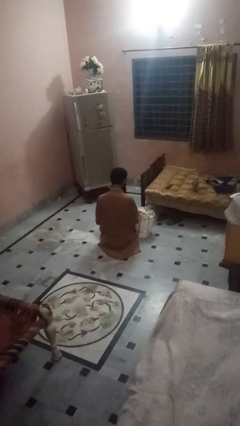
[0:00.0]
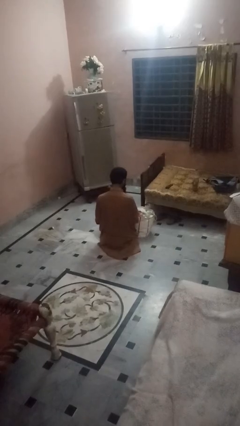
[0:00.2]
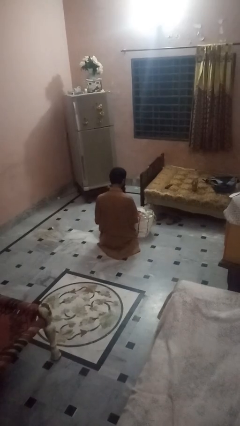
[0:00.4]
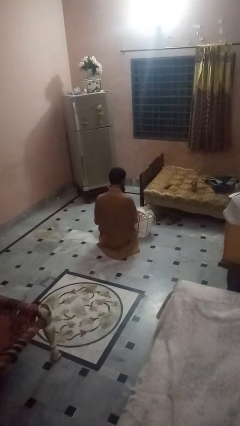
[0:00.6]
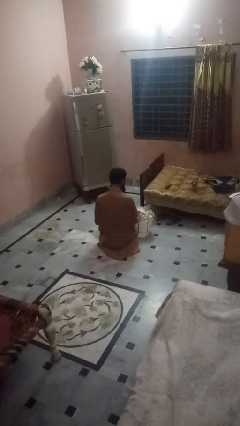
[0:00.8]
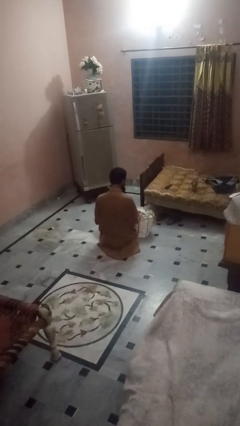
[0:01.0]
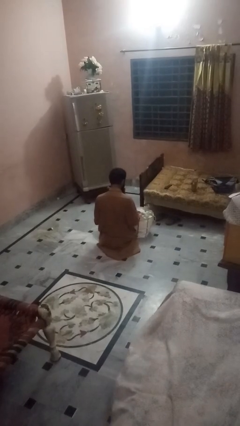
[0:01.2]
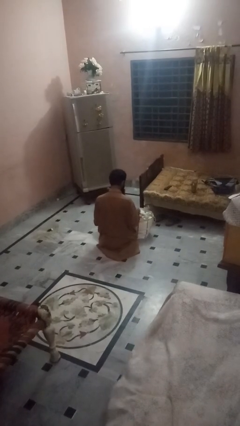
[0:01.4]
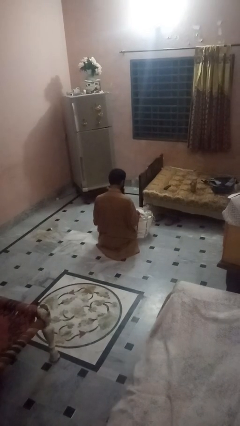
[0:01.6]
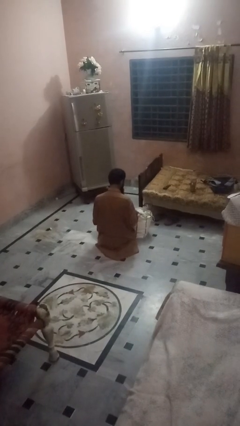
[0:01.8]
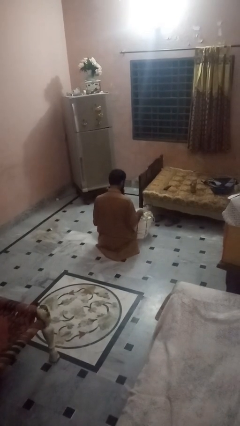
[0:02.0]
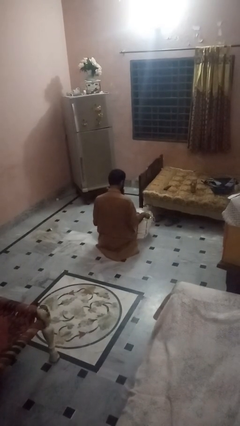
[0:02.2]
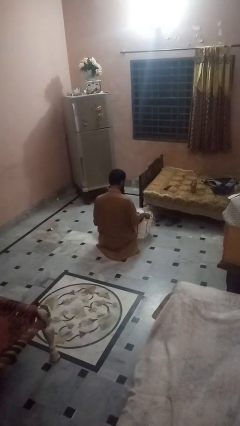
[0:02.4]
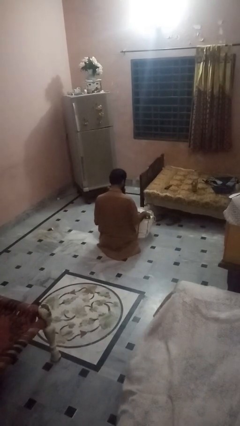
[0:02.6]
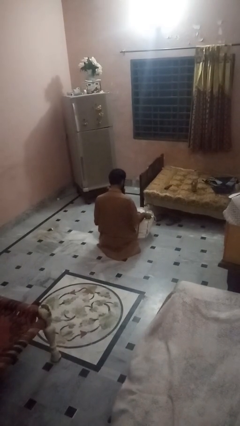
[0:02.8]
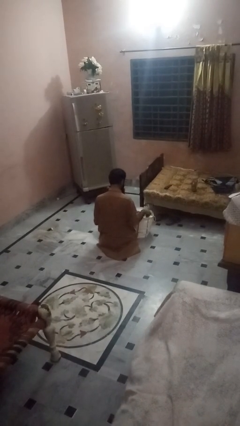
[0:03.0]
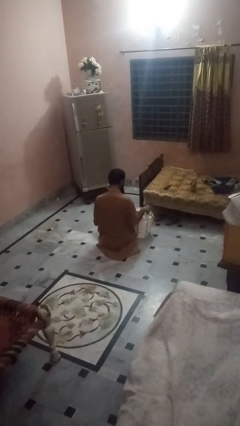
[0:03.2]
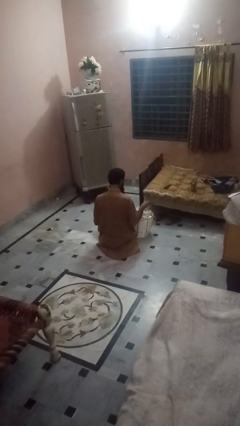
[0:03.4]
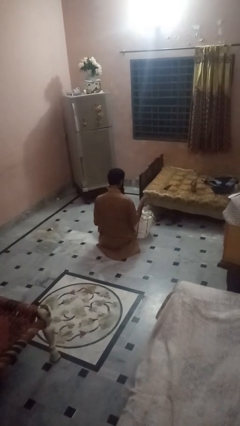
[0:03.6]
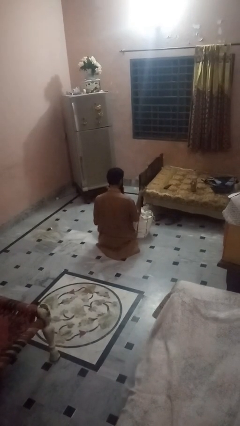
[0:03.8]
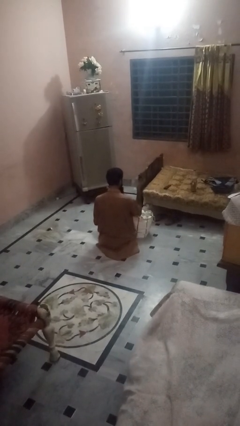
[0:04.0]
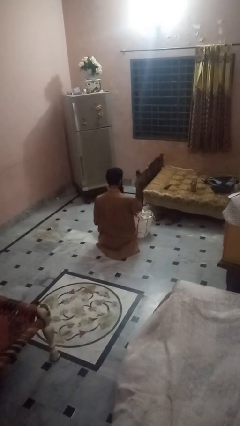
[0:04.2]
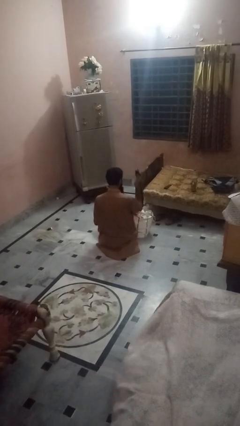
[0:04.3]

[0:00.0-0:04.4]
person takes object from bag

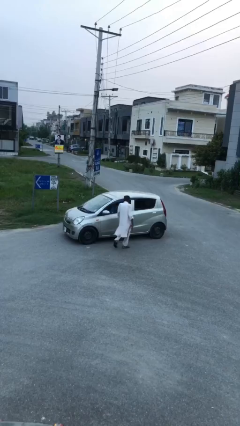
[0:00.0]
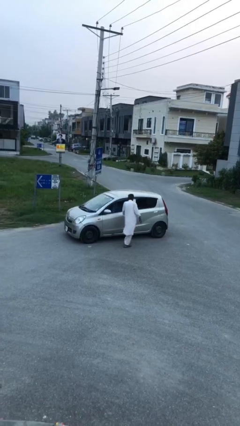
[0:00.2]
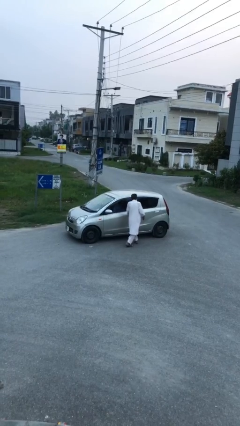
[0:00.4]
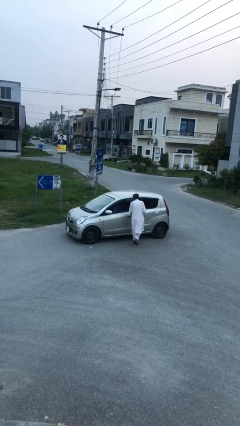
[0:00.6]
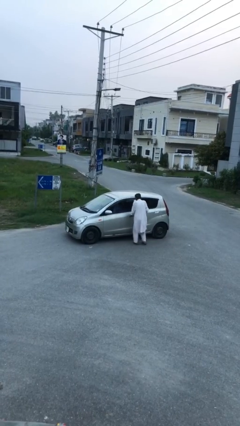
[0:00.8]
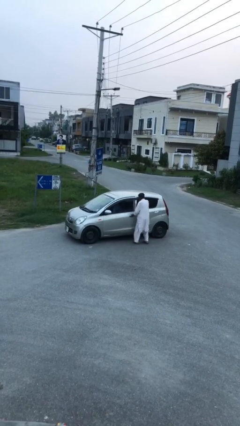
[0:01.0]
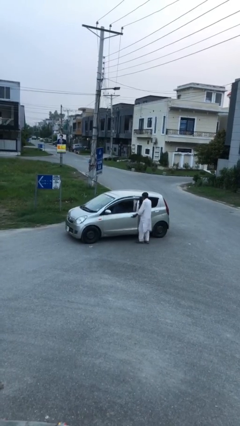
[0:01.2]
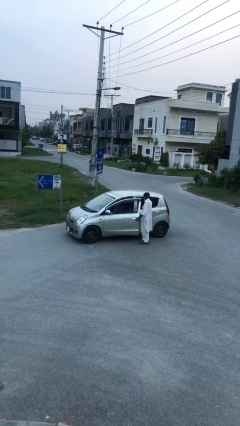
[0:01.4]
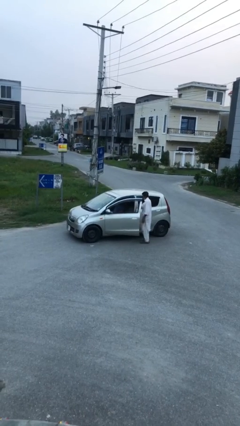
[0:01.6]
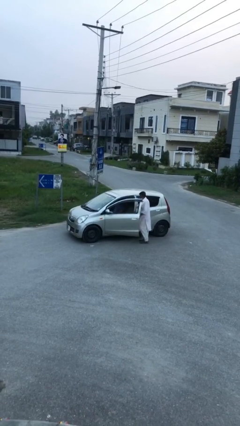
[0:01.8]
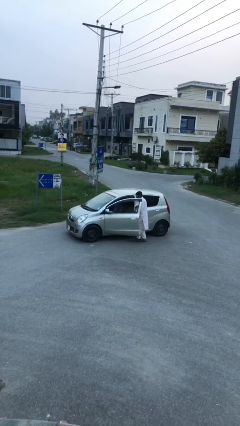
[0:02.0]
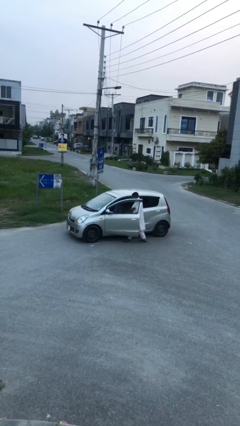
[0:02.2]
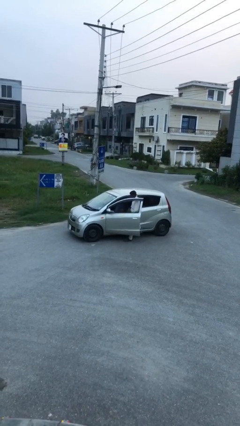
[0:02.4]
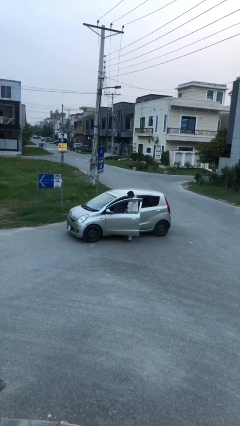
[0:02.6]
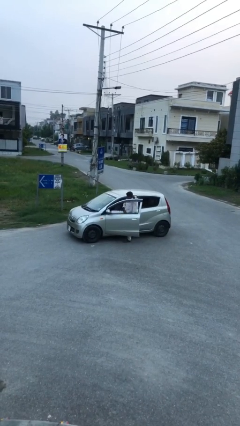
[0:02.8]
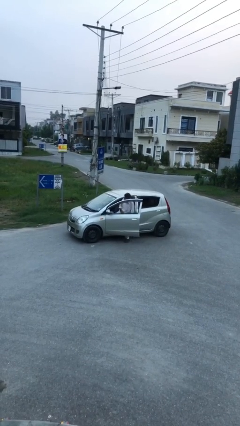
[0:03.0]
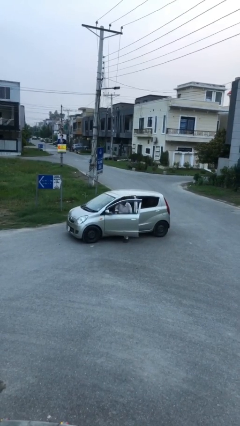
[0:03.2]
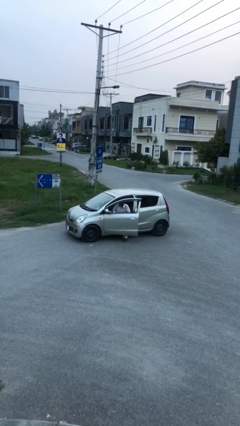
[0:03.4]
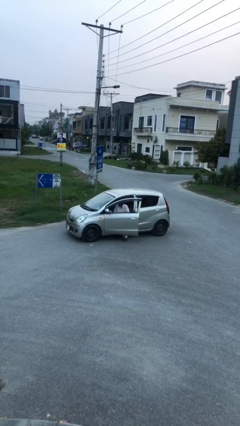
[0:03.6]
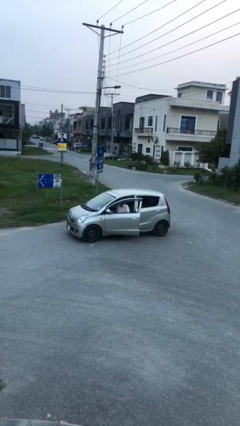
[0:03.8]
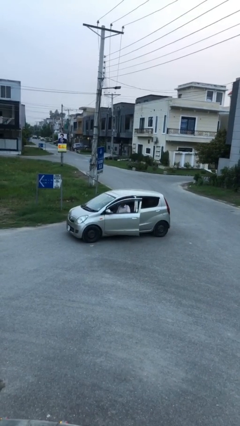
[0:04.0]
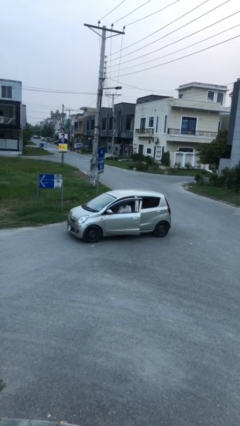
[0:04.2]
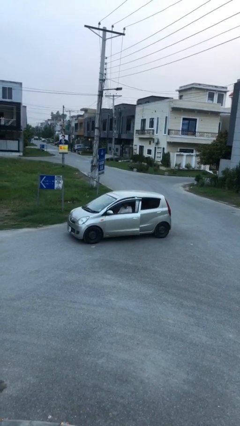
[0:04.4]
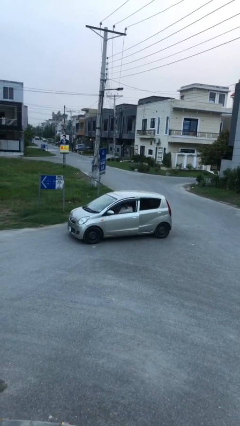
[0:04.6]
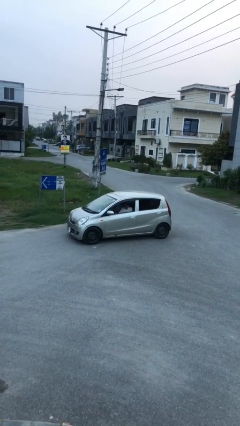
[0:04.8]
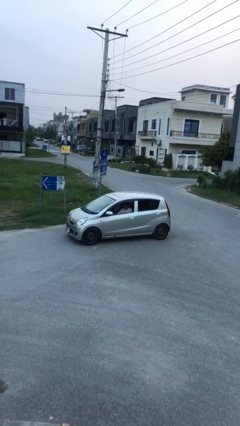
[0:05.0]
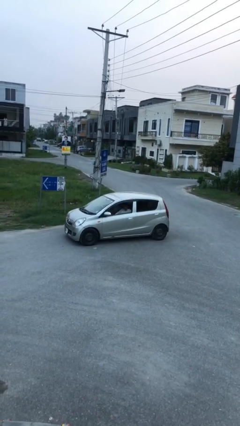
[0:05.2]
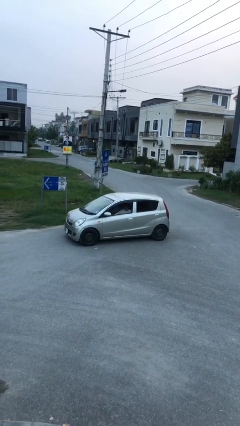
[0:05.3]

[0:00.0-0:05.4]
car picks up person

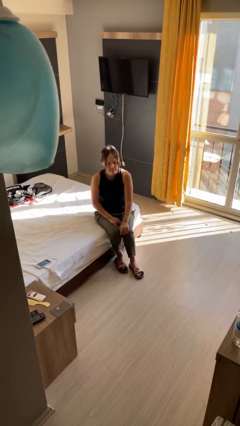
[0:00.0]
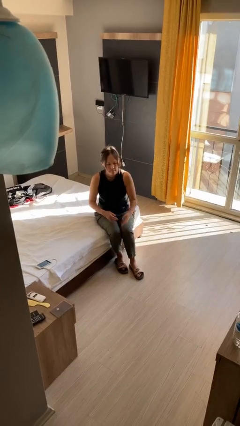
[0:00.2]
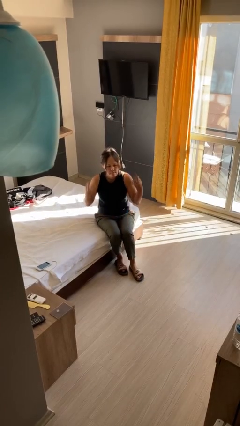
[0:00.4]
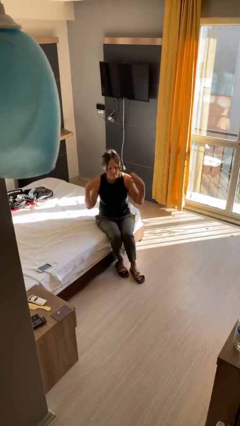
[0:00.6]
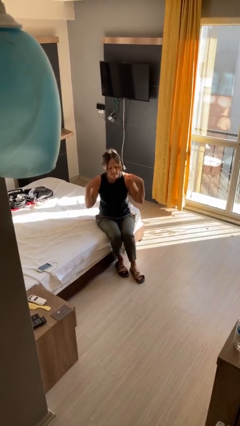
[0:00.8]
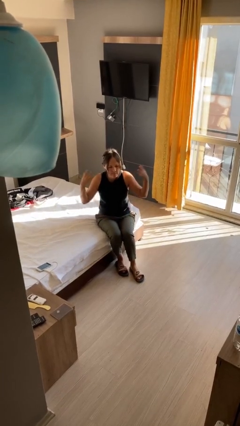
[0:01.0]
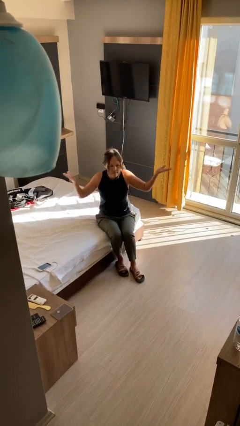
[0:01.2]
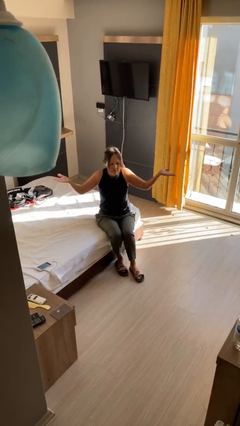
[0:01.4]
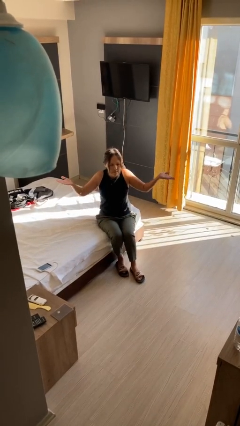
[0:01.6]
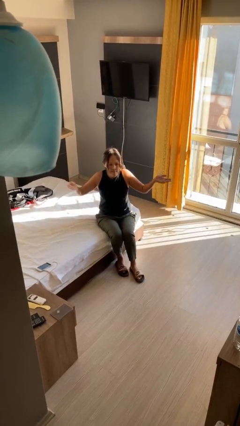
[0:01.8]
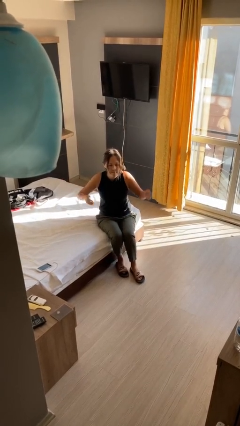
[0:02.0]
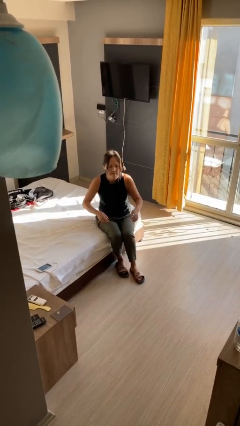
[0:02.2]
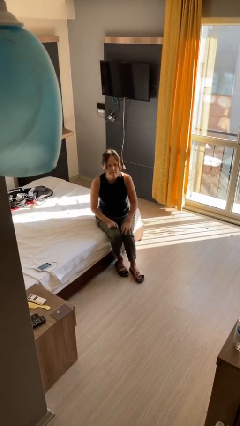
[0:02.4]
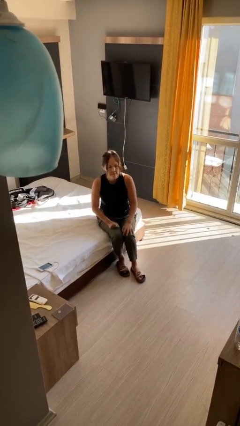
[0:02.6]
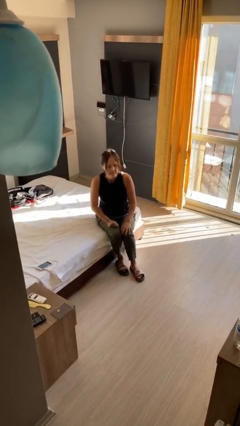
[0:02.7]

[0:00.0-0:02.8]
person shrugs

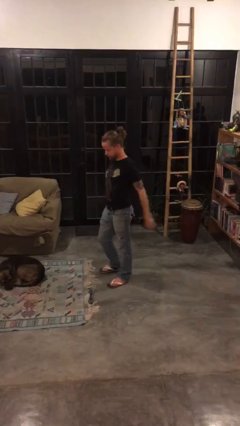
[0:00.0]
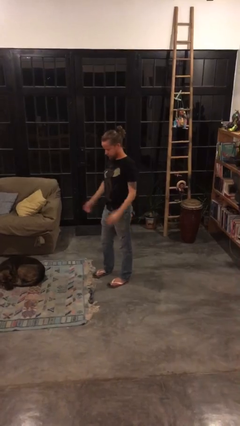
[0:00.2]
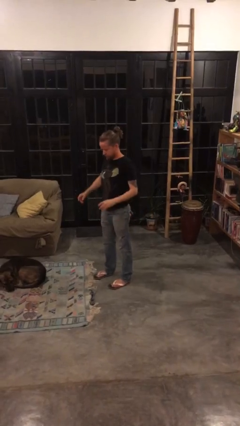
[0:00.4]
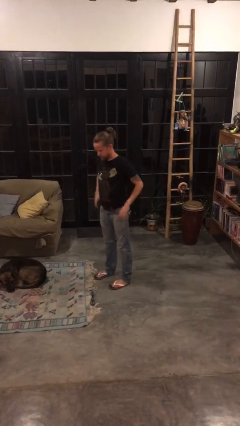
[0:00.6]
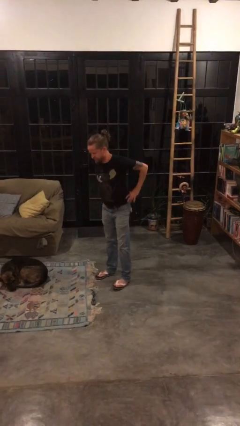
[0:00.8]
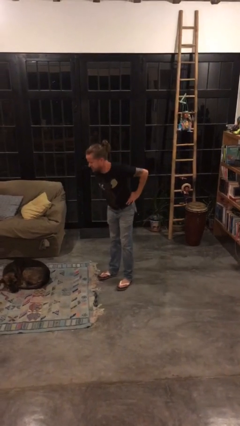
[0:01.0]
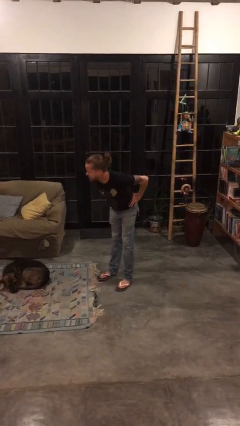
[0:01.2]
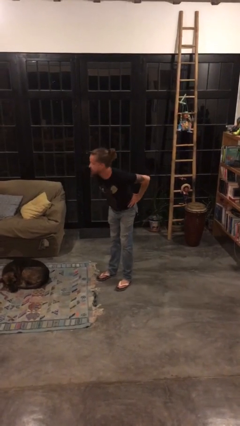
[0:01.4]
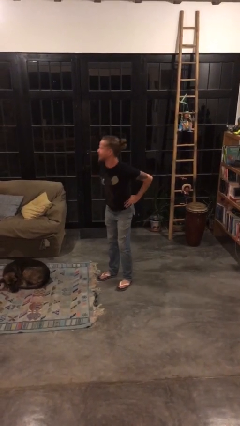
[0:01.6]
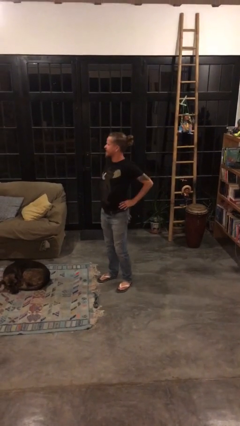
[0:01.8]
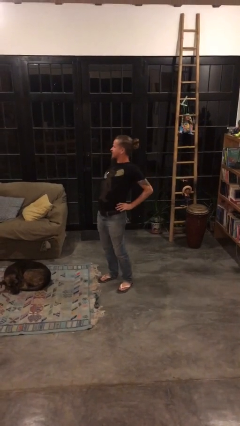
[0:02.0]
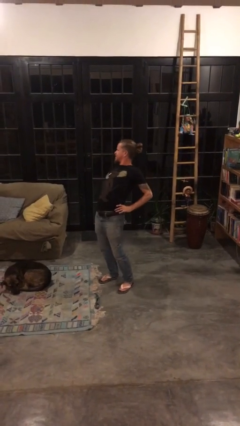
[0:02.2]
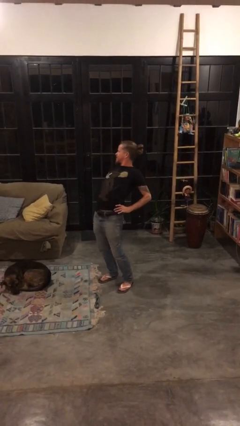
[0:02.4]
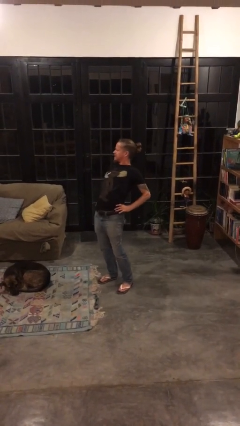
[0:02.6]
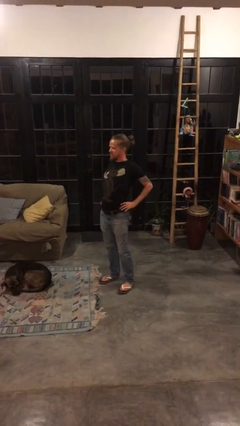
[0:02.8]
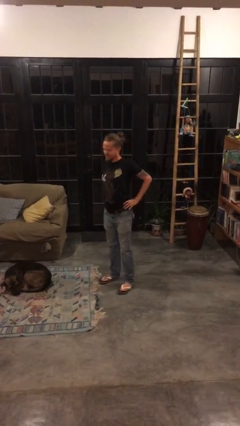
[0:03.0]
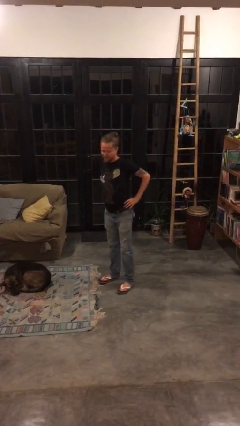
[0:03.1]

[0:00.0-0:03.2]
person stretches back

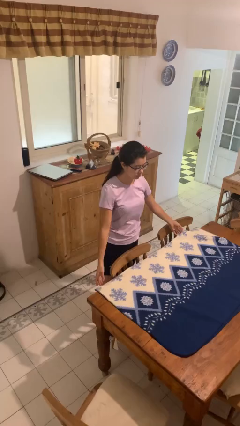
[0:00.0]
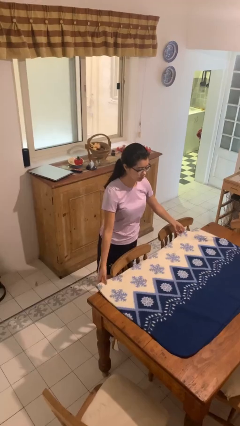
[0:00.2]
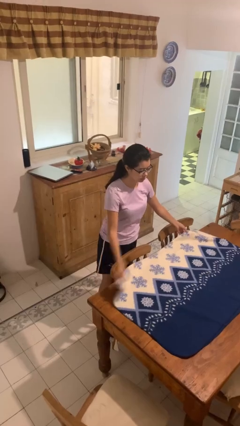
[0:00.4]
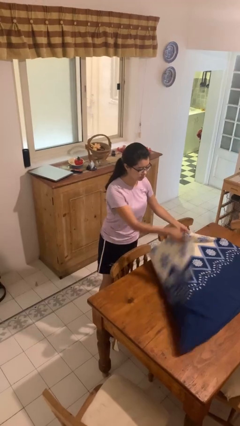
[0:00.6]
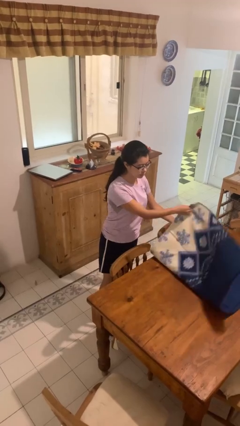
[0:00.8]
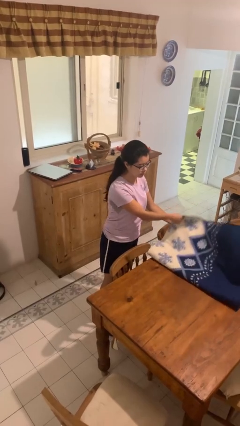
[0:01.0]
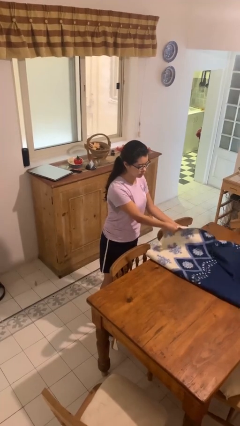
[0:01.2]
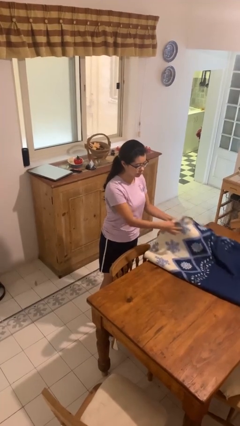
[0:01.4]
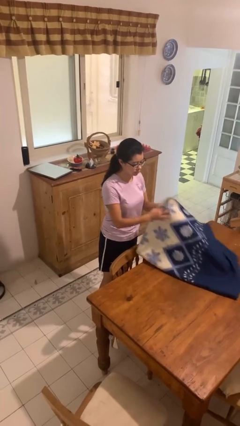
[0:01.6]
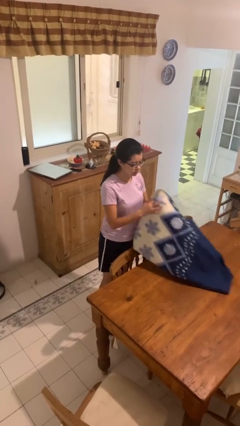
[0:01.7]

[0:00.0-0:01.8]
person folds tablecloth
